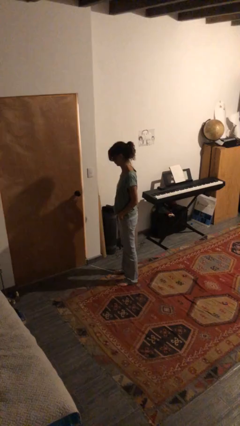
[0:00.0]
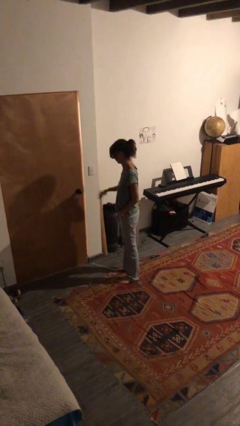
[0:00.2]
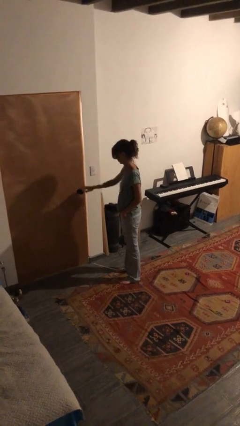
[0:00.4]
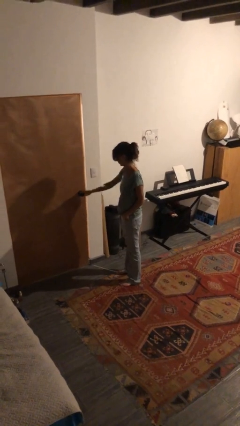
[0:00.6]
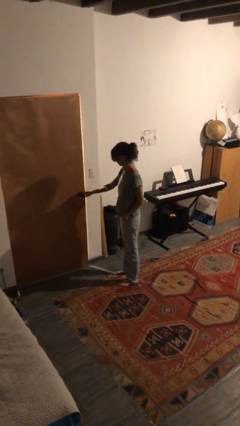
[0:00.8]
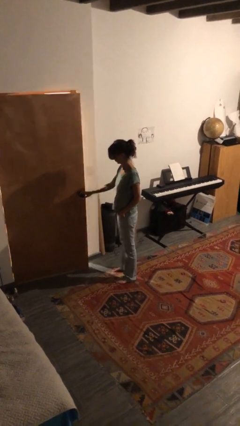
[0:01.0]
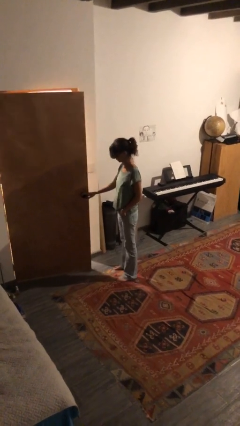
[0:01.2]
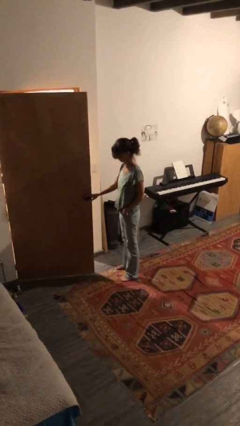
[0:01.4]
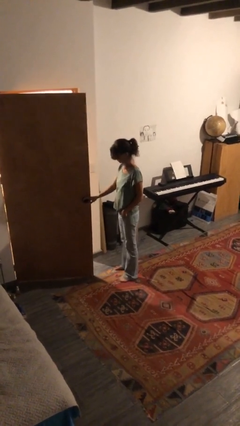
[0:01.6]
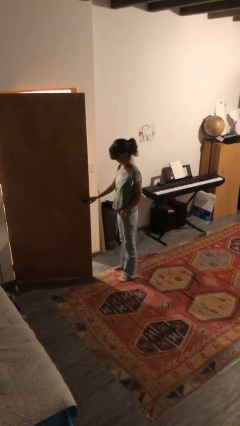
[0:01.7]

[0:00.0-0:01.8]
person opens facility door

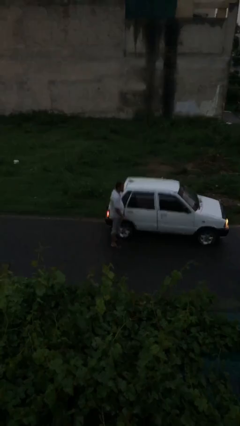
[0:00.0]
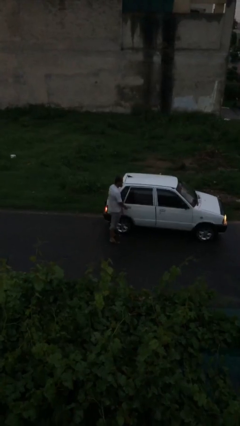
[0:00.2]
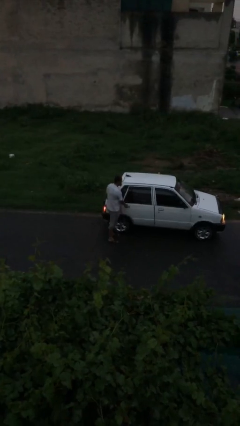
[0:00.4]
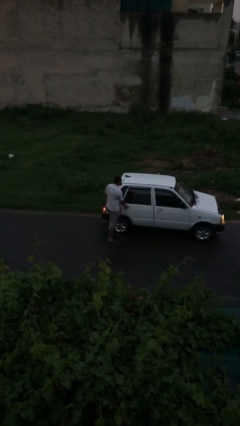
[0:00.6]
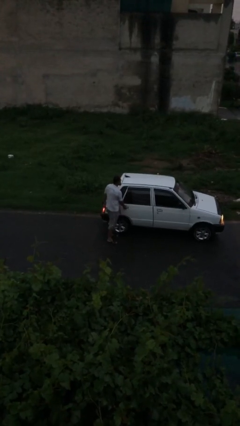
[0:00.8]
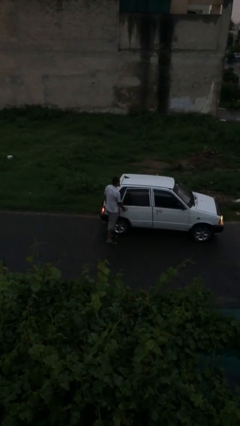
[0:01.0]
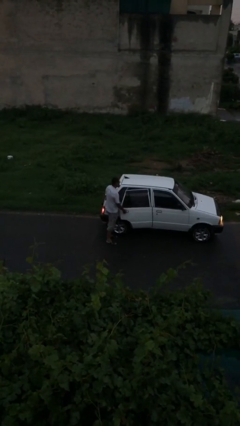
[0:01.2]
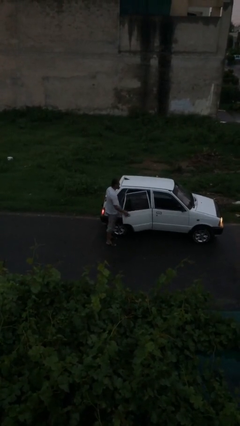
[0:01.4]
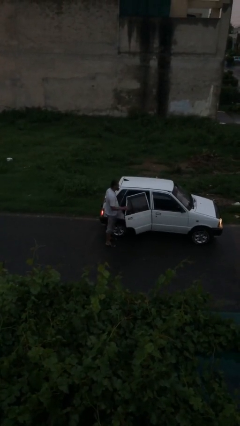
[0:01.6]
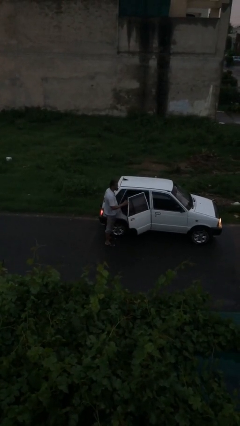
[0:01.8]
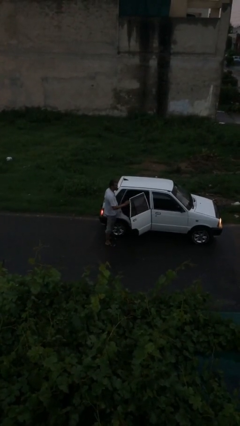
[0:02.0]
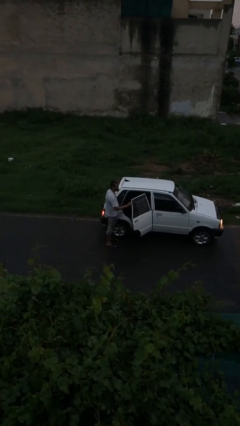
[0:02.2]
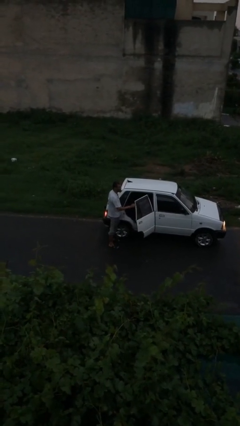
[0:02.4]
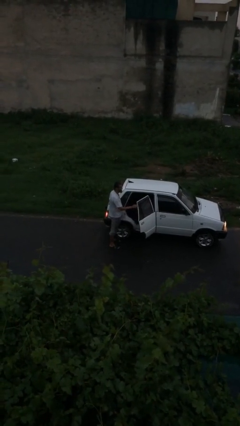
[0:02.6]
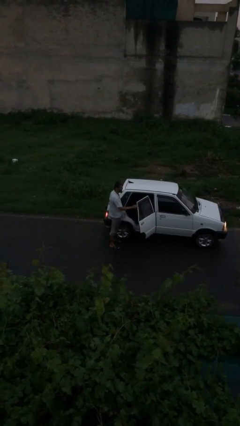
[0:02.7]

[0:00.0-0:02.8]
person opens car door

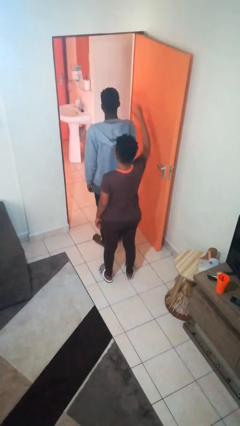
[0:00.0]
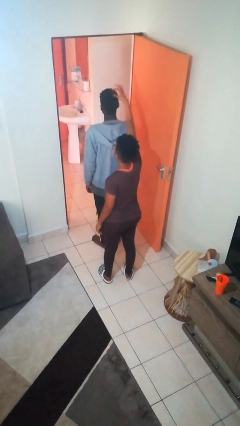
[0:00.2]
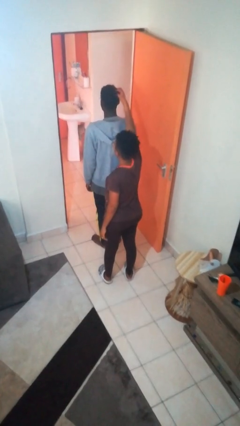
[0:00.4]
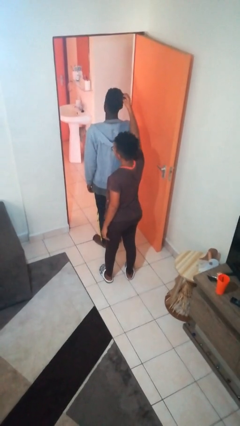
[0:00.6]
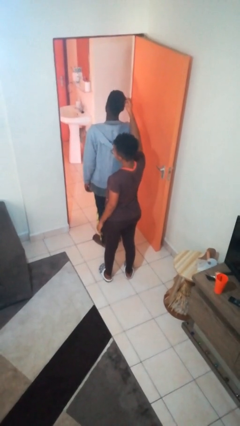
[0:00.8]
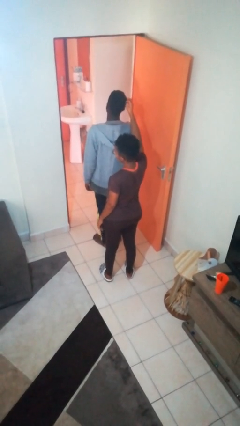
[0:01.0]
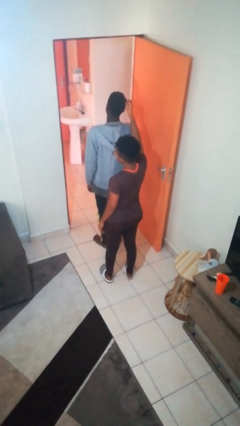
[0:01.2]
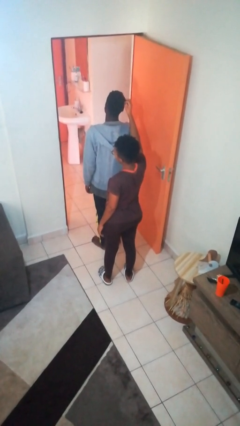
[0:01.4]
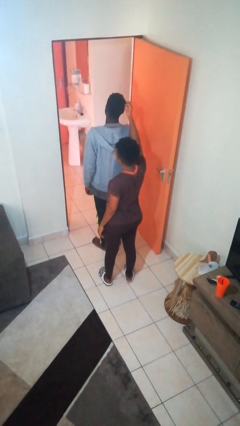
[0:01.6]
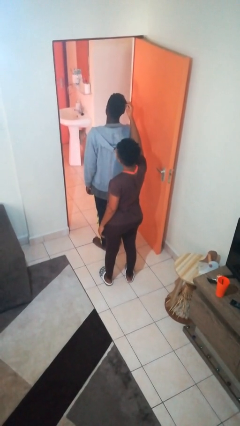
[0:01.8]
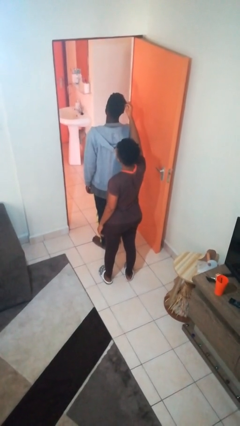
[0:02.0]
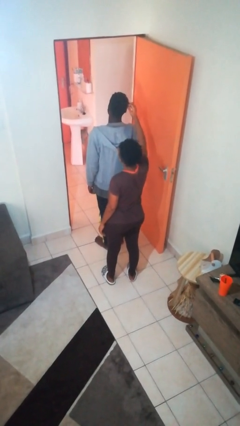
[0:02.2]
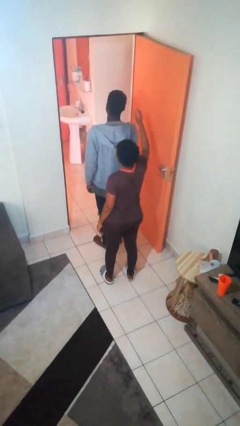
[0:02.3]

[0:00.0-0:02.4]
person grabs person by hair

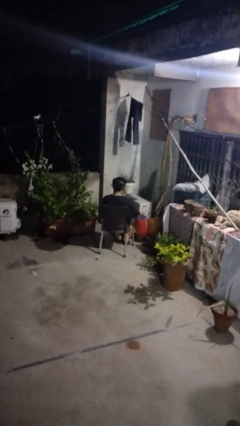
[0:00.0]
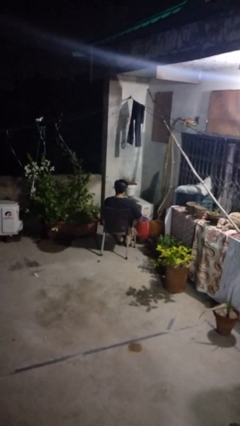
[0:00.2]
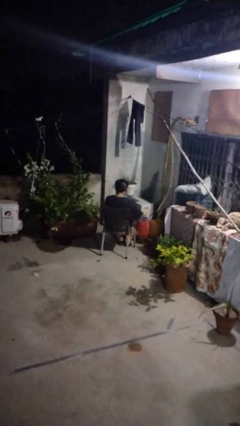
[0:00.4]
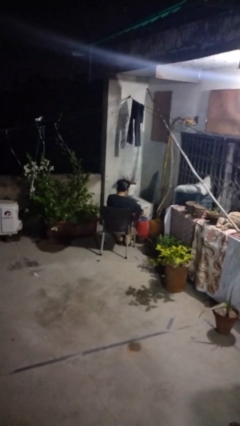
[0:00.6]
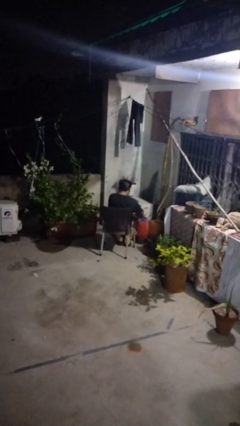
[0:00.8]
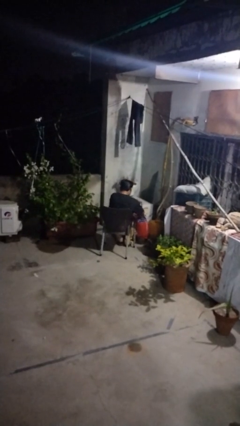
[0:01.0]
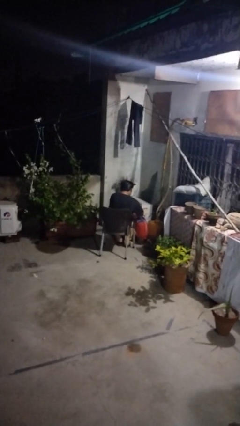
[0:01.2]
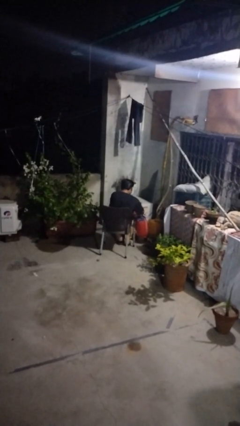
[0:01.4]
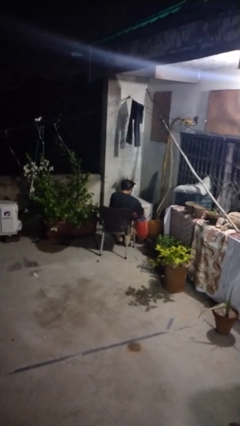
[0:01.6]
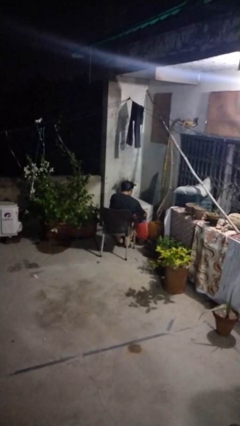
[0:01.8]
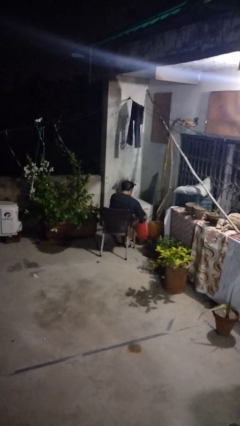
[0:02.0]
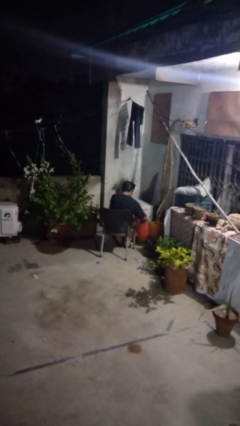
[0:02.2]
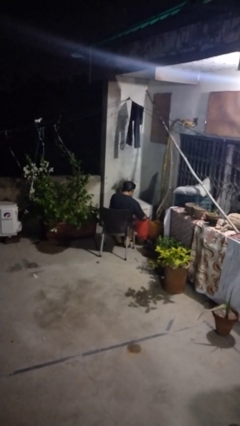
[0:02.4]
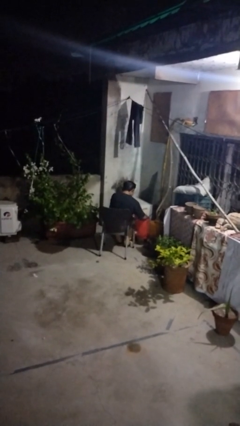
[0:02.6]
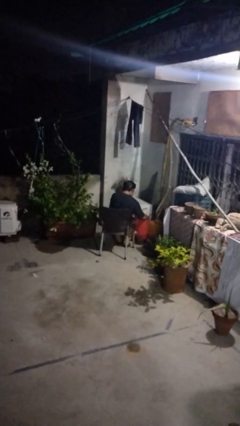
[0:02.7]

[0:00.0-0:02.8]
person searches in bag

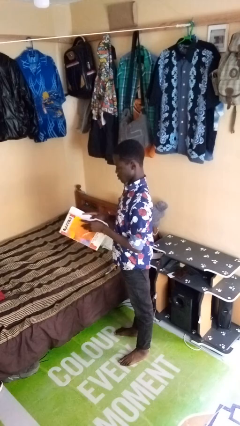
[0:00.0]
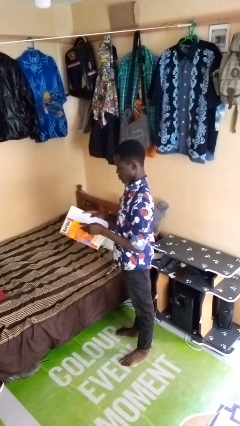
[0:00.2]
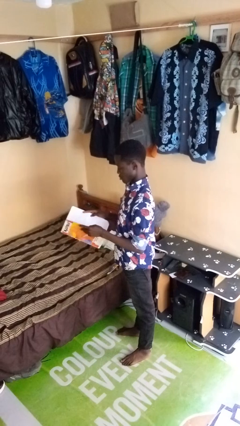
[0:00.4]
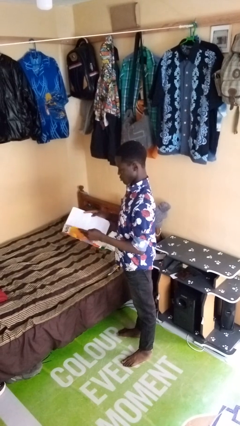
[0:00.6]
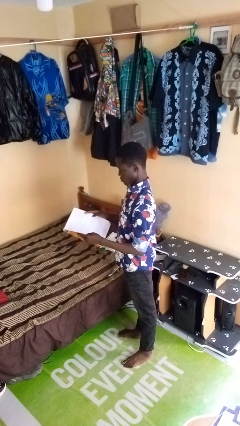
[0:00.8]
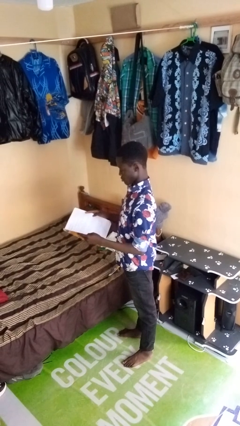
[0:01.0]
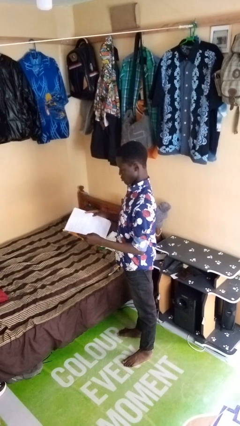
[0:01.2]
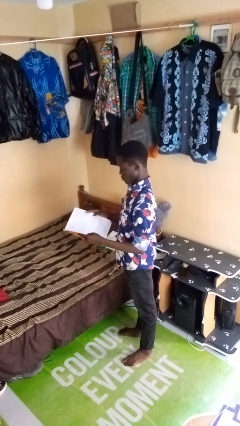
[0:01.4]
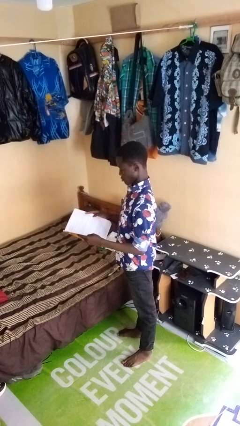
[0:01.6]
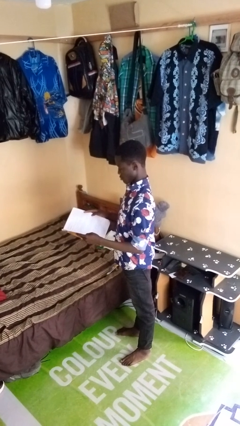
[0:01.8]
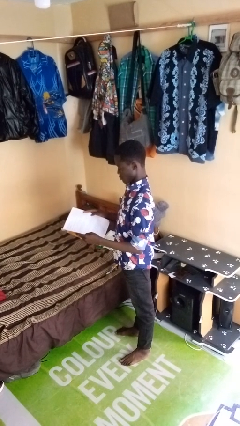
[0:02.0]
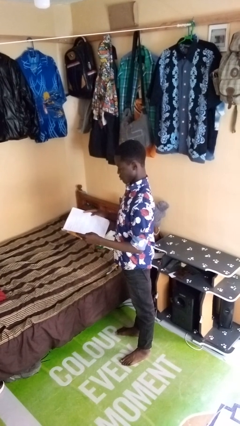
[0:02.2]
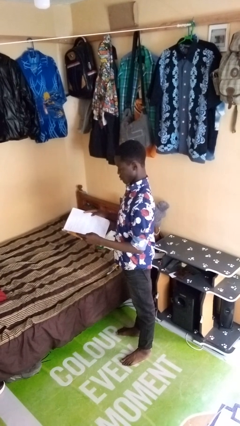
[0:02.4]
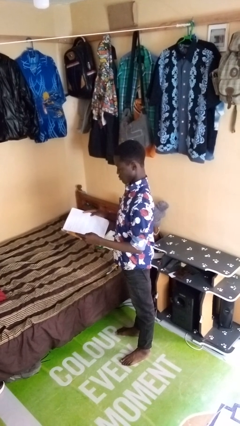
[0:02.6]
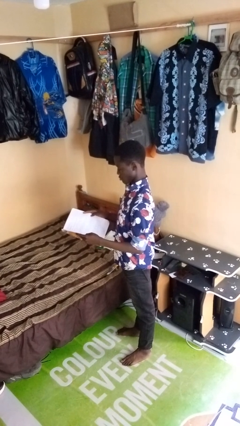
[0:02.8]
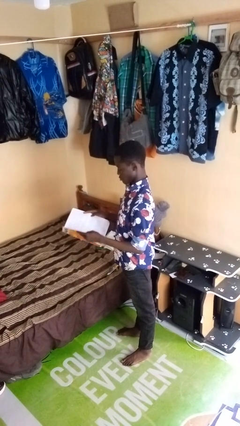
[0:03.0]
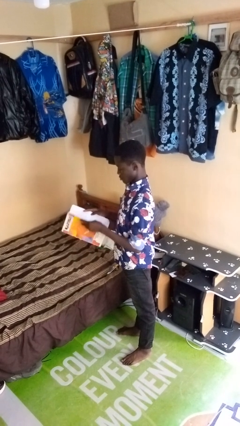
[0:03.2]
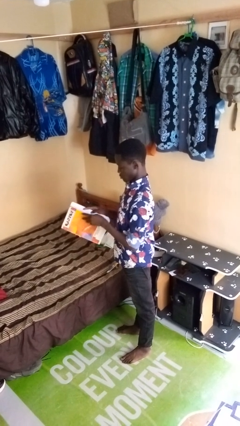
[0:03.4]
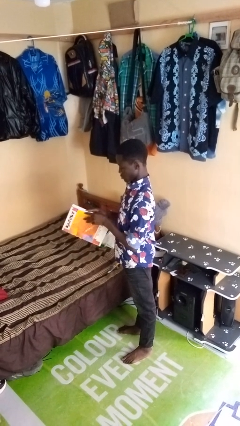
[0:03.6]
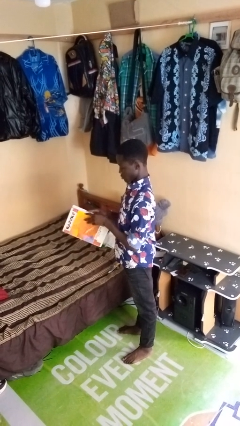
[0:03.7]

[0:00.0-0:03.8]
person reads newspaper

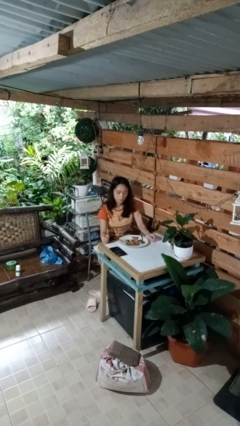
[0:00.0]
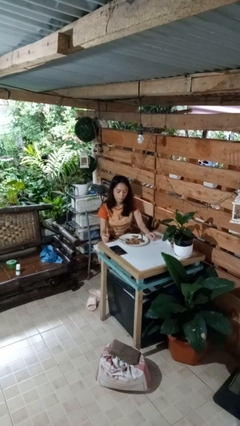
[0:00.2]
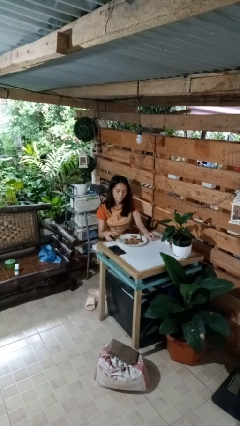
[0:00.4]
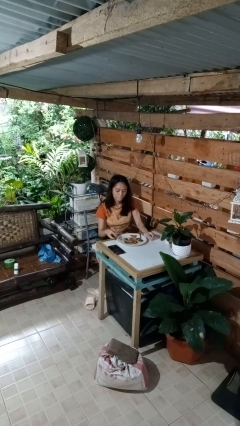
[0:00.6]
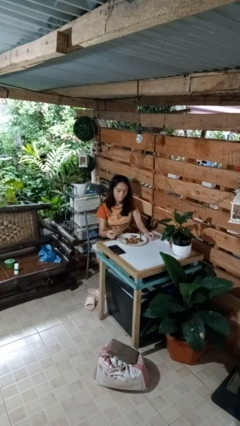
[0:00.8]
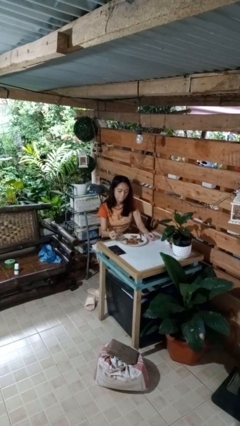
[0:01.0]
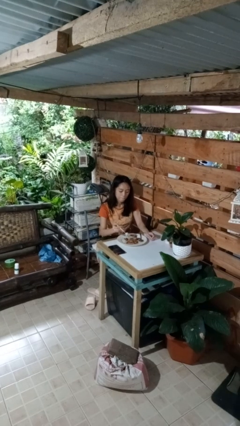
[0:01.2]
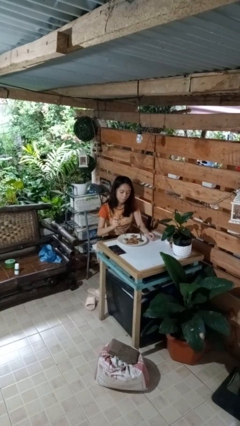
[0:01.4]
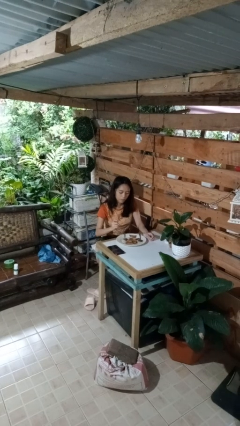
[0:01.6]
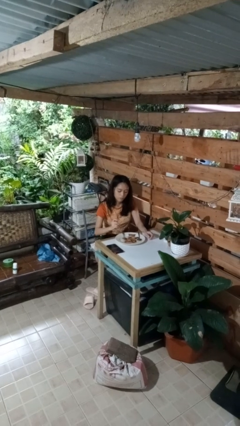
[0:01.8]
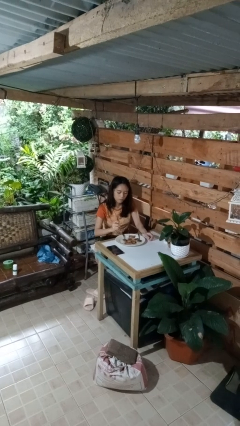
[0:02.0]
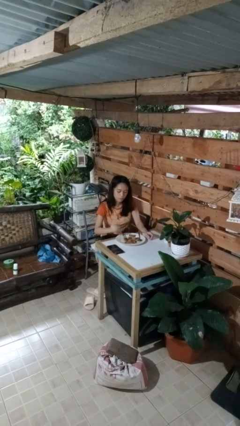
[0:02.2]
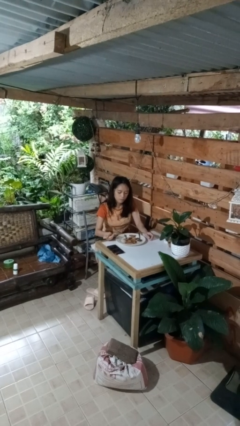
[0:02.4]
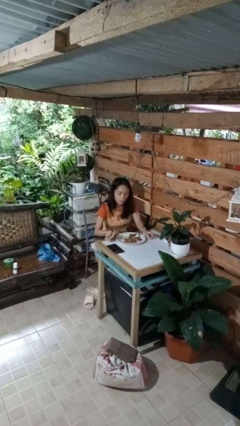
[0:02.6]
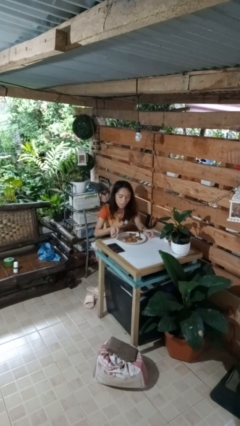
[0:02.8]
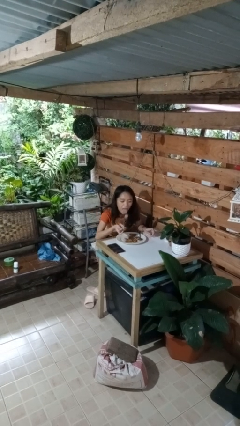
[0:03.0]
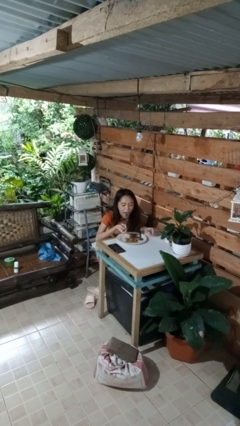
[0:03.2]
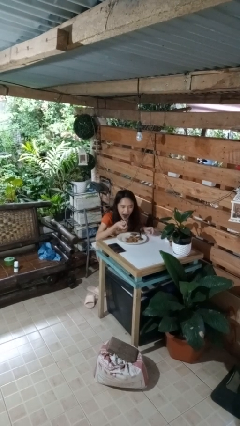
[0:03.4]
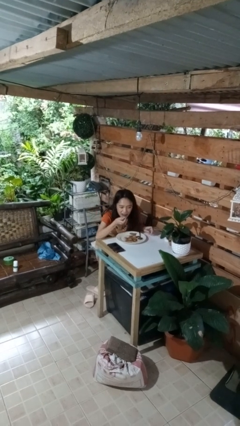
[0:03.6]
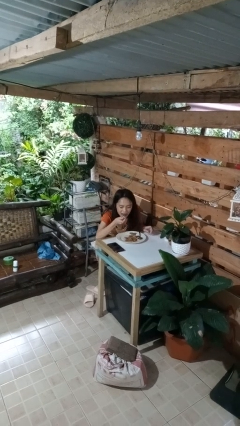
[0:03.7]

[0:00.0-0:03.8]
person eats with utensil
